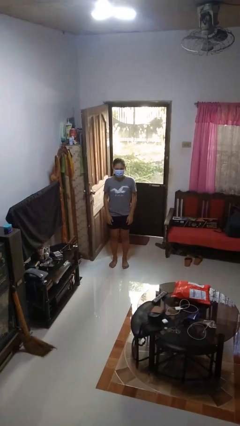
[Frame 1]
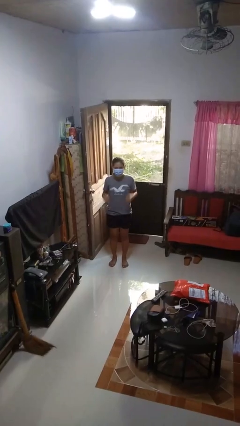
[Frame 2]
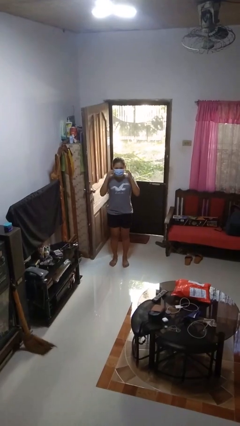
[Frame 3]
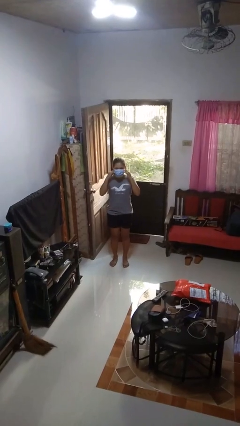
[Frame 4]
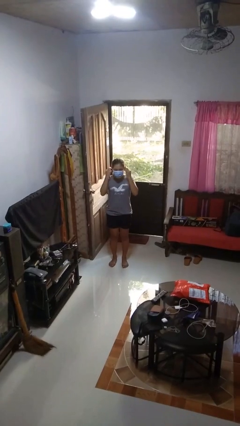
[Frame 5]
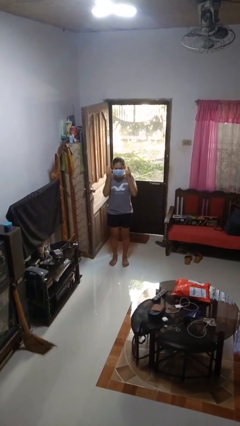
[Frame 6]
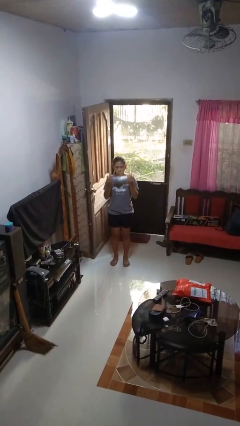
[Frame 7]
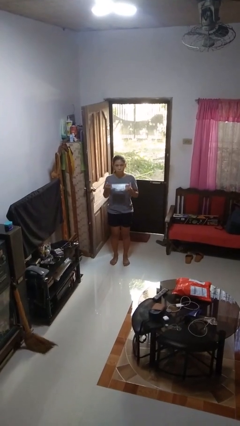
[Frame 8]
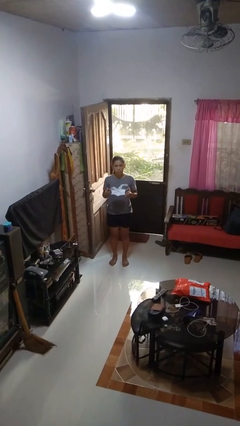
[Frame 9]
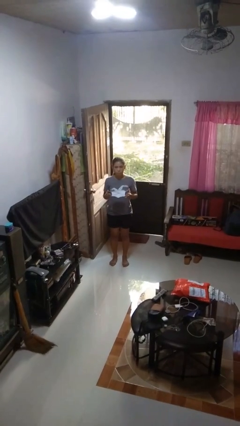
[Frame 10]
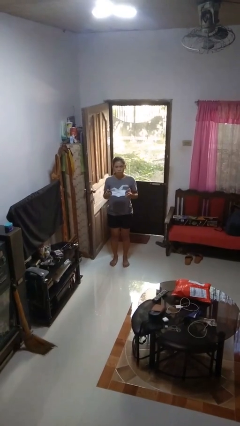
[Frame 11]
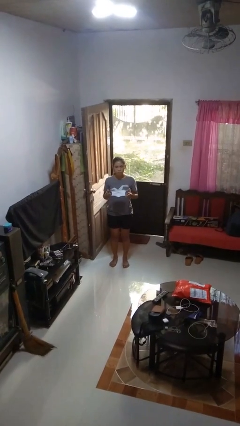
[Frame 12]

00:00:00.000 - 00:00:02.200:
person takes off facemask

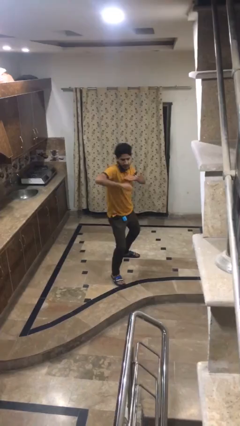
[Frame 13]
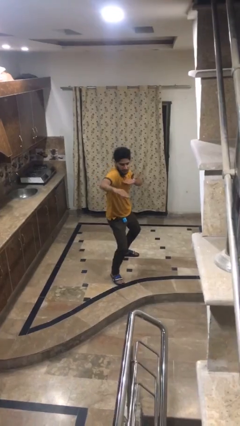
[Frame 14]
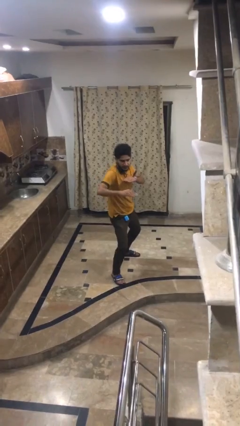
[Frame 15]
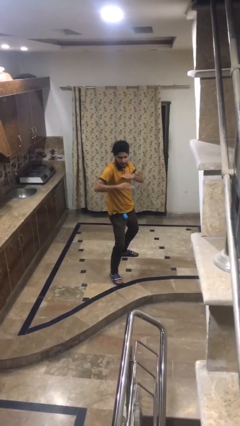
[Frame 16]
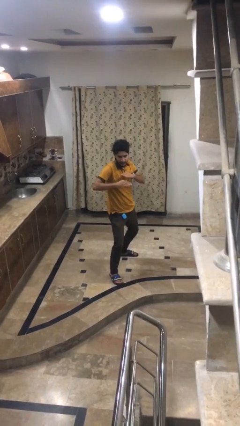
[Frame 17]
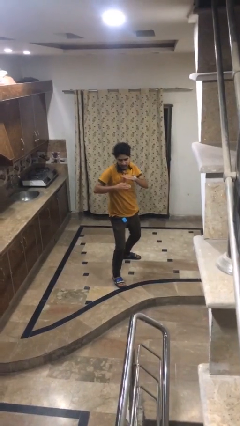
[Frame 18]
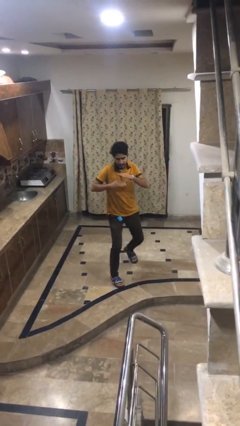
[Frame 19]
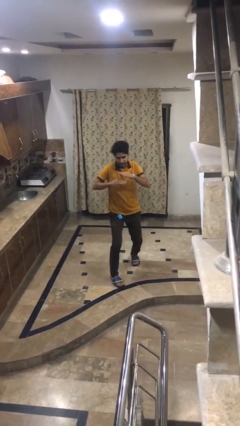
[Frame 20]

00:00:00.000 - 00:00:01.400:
person karate chop

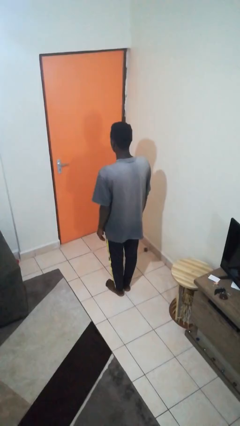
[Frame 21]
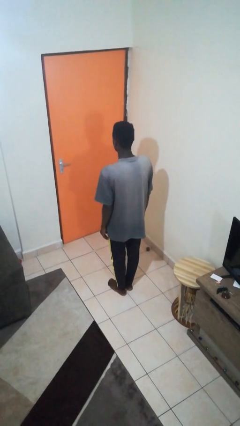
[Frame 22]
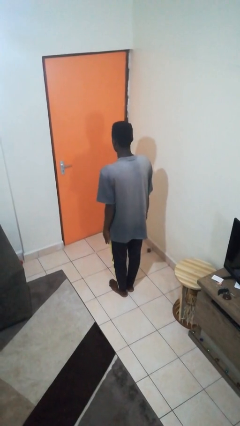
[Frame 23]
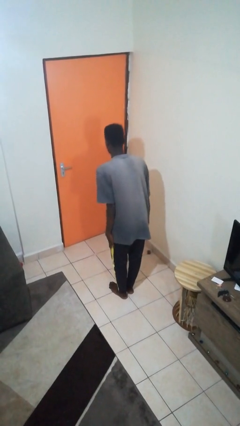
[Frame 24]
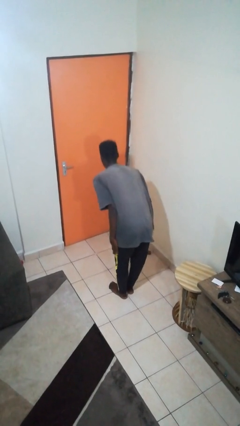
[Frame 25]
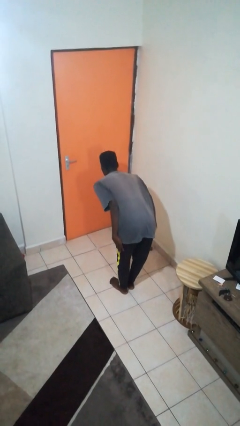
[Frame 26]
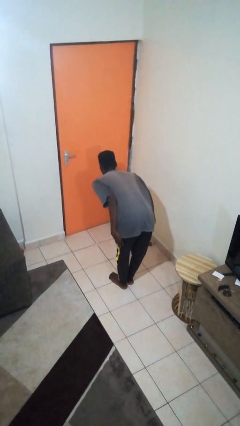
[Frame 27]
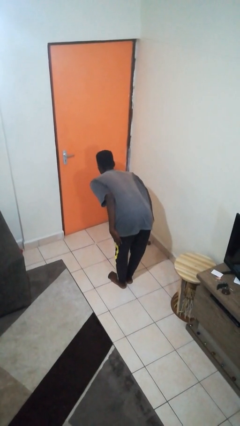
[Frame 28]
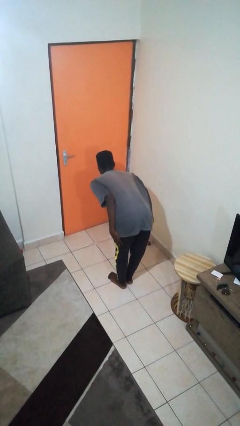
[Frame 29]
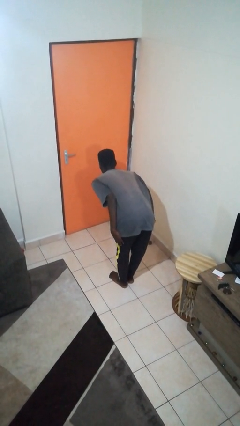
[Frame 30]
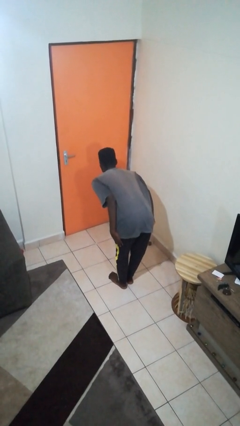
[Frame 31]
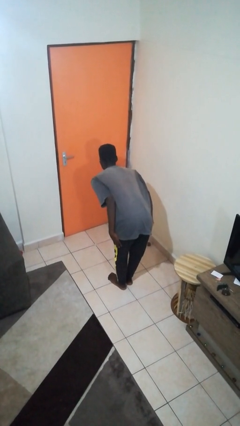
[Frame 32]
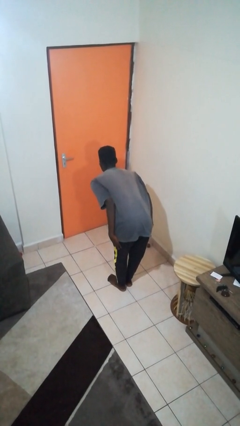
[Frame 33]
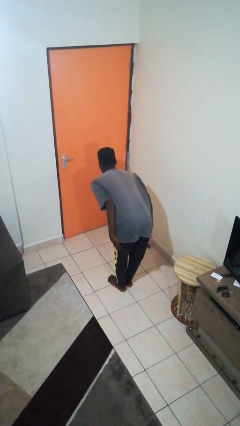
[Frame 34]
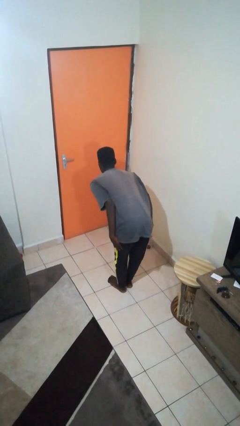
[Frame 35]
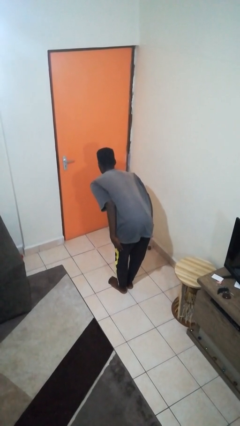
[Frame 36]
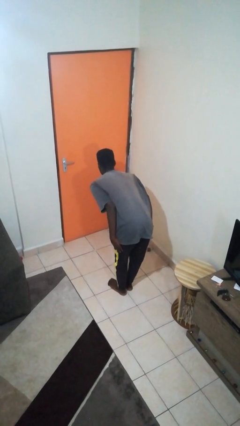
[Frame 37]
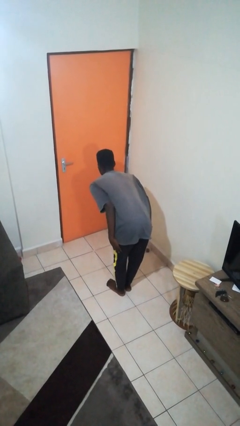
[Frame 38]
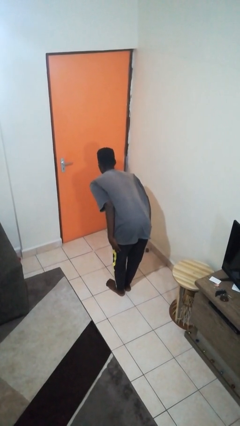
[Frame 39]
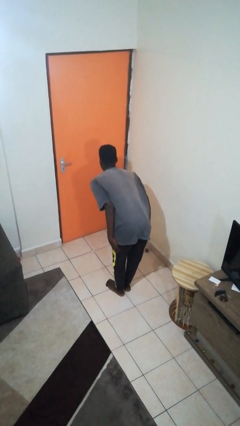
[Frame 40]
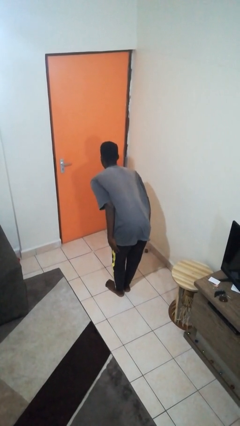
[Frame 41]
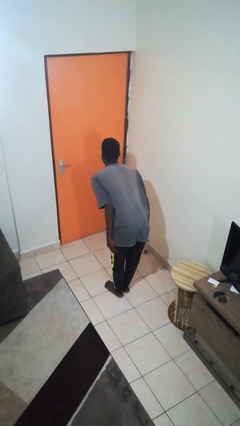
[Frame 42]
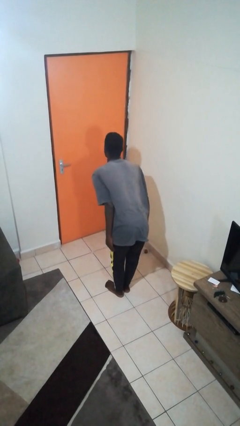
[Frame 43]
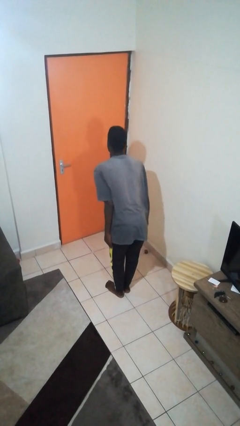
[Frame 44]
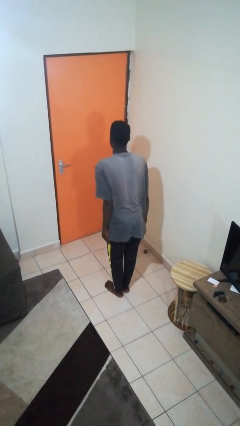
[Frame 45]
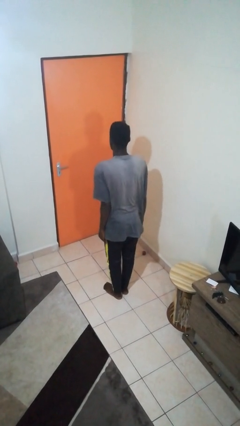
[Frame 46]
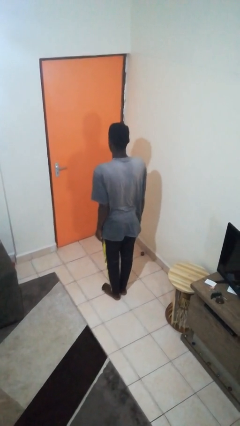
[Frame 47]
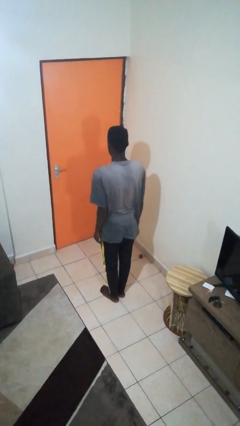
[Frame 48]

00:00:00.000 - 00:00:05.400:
person bows

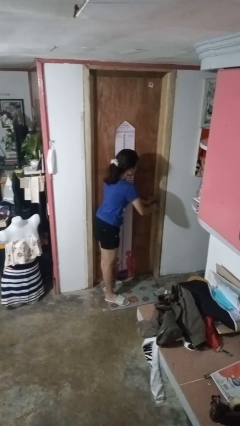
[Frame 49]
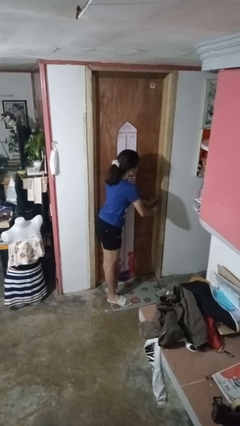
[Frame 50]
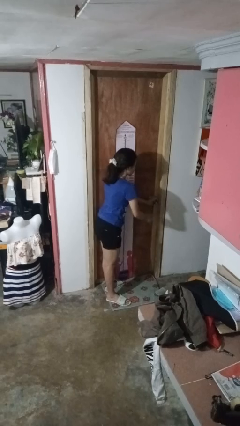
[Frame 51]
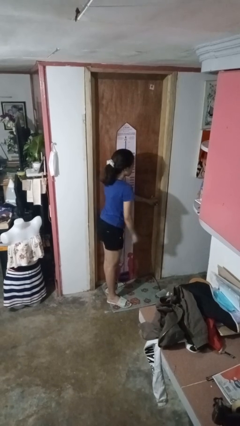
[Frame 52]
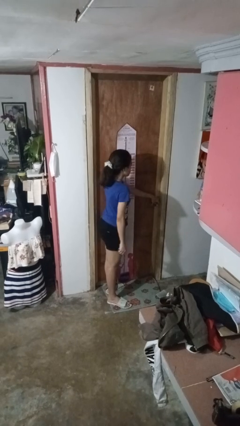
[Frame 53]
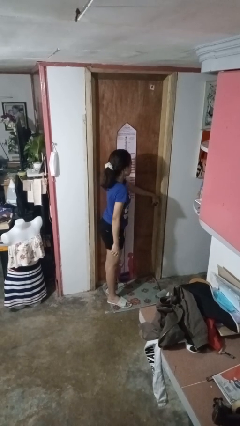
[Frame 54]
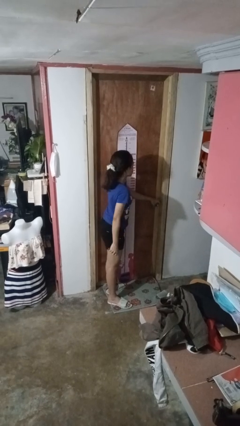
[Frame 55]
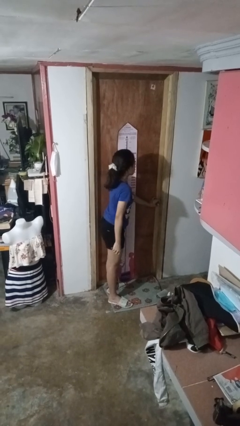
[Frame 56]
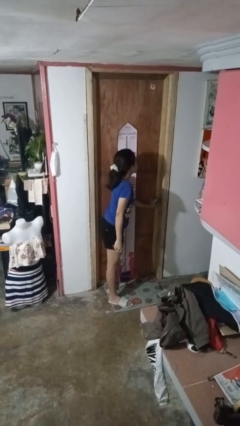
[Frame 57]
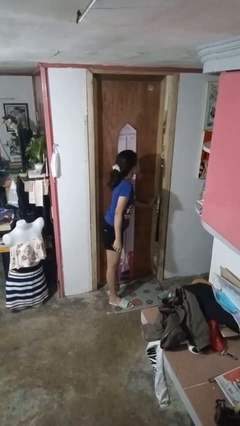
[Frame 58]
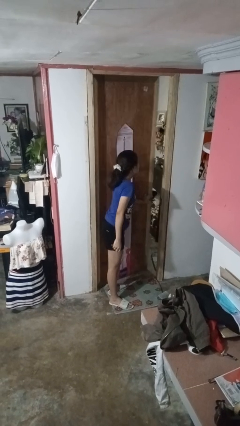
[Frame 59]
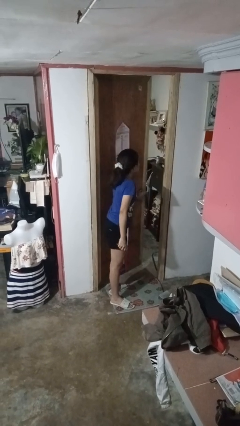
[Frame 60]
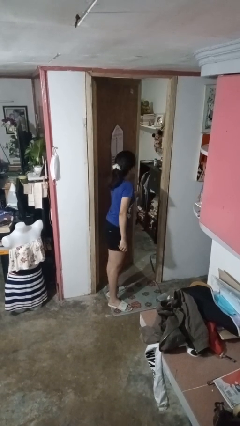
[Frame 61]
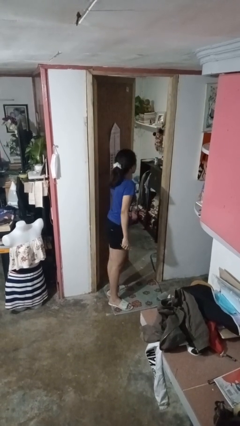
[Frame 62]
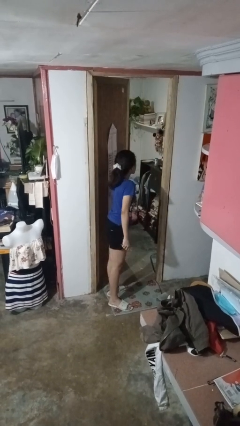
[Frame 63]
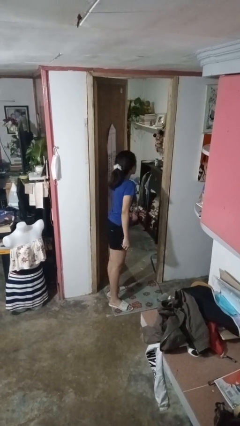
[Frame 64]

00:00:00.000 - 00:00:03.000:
person opens facility door

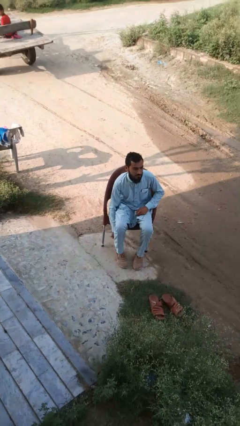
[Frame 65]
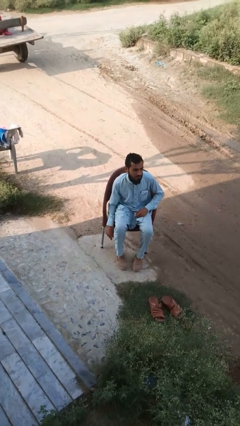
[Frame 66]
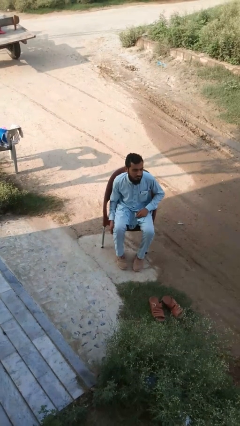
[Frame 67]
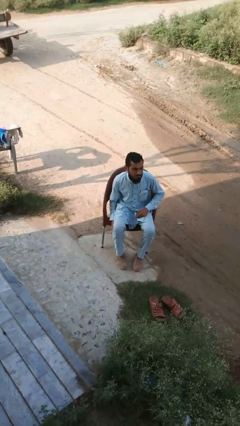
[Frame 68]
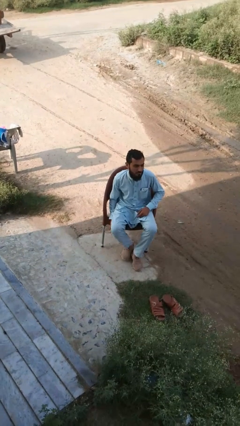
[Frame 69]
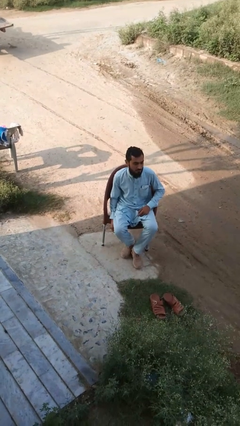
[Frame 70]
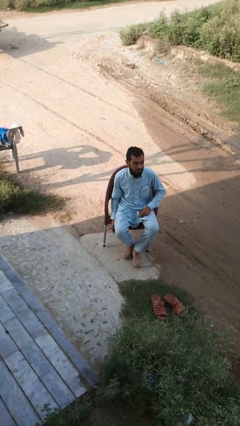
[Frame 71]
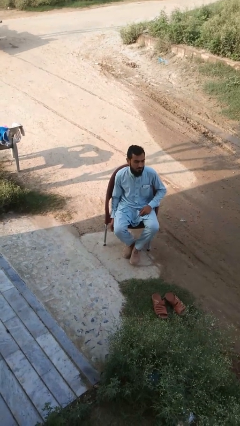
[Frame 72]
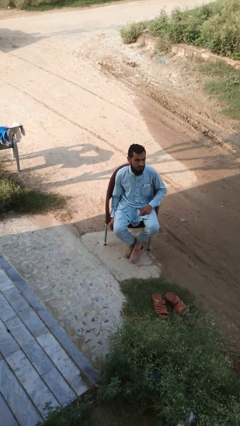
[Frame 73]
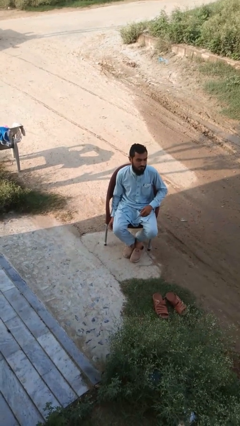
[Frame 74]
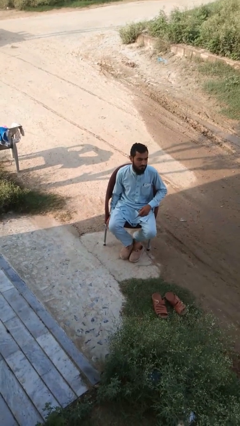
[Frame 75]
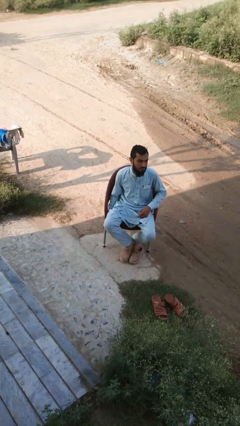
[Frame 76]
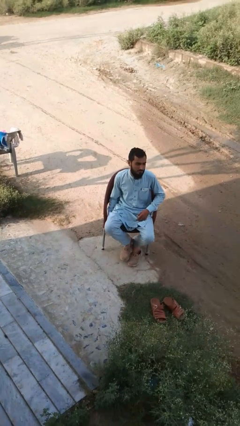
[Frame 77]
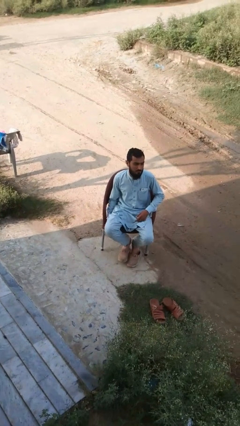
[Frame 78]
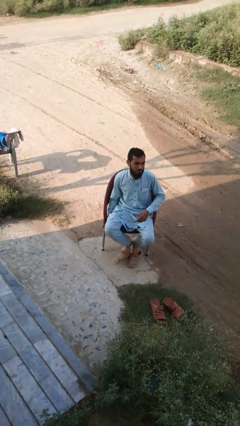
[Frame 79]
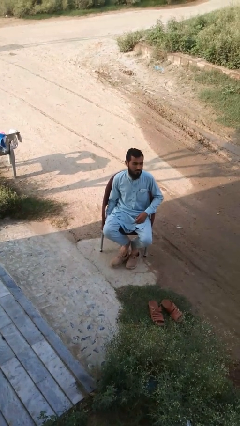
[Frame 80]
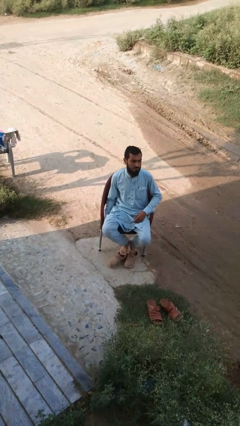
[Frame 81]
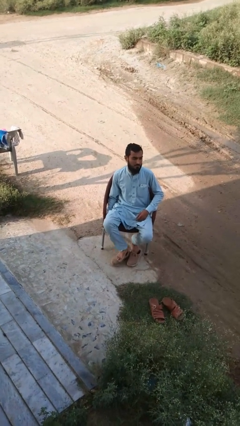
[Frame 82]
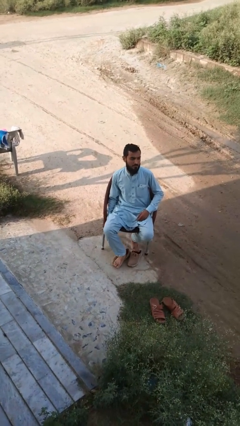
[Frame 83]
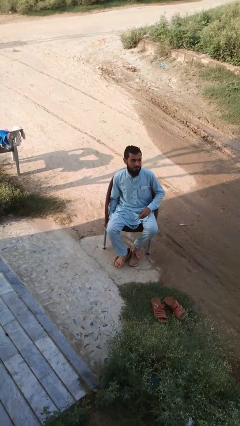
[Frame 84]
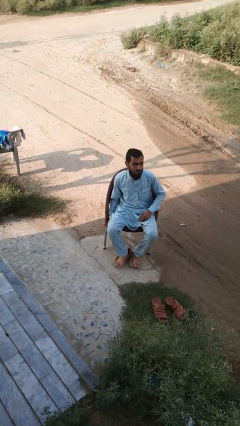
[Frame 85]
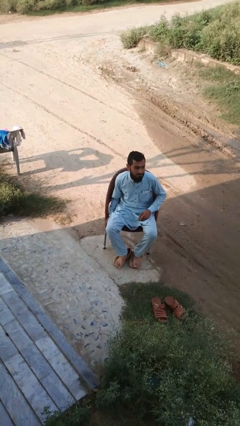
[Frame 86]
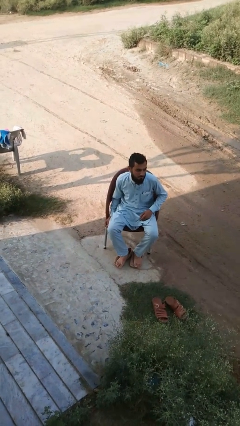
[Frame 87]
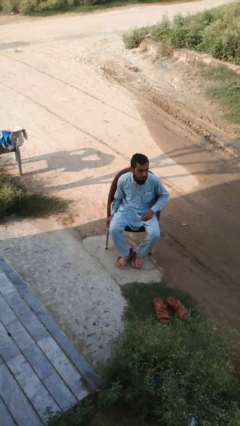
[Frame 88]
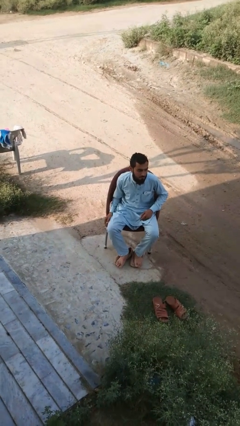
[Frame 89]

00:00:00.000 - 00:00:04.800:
person takes off shoes

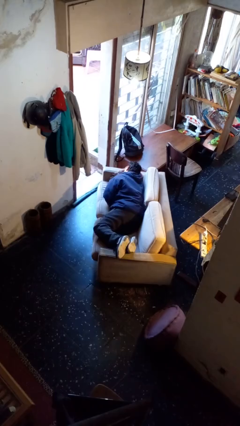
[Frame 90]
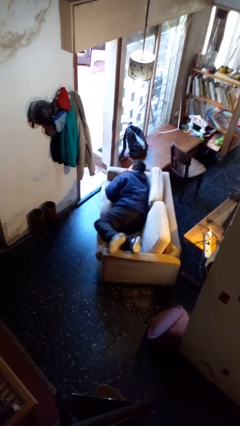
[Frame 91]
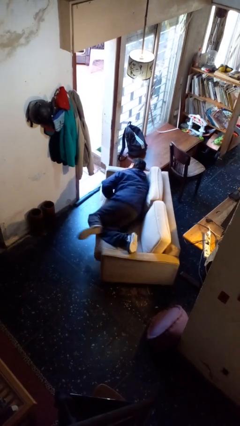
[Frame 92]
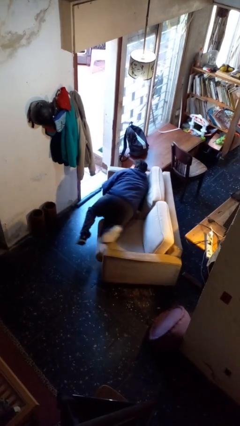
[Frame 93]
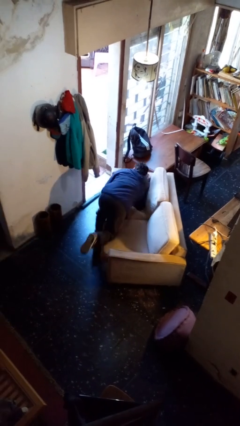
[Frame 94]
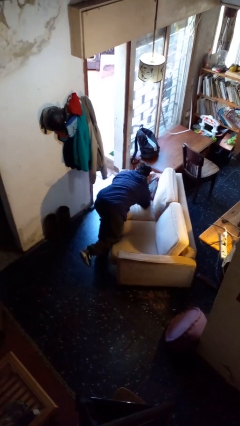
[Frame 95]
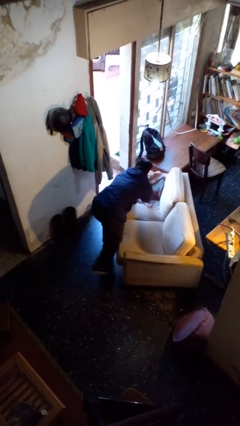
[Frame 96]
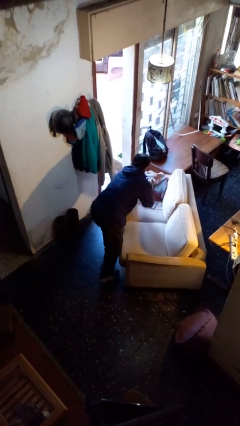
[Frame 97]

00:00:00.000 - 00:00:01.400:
person stands up
